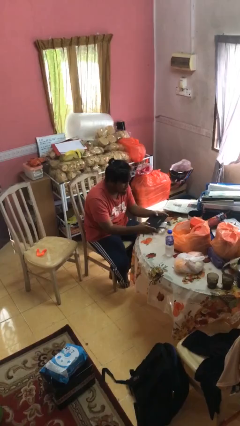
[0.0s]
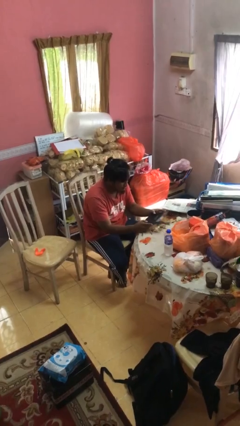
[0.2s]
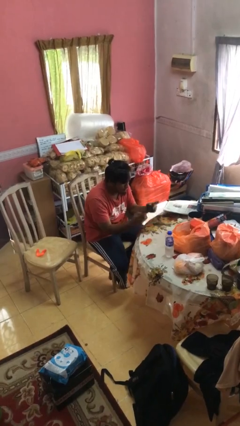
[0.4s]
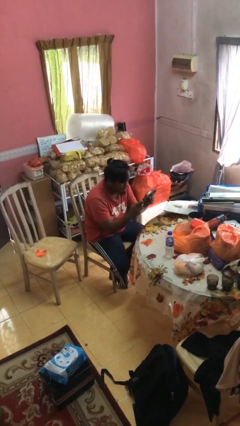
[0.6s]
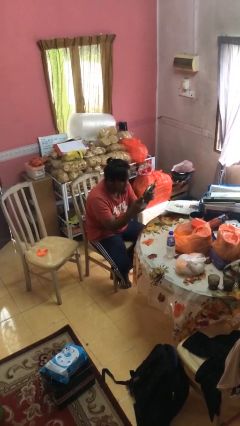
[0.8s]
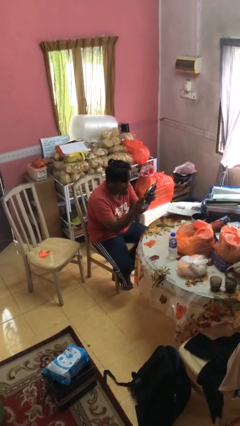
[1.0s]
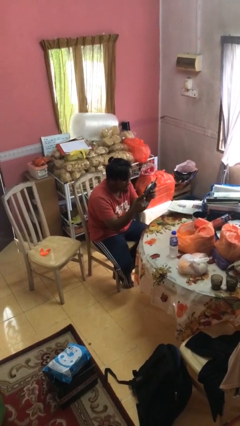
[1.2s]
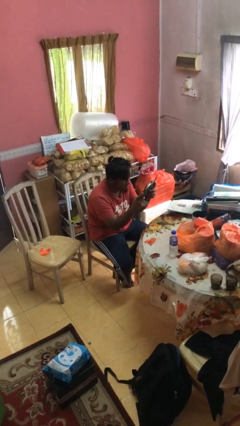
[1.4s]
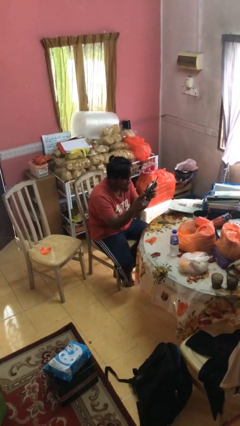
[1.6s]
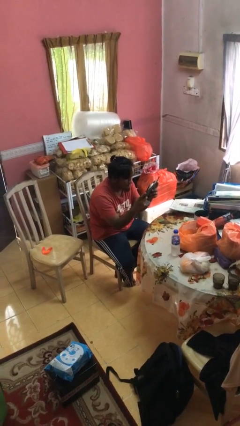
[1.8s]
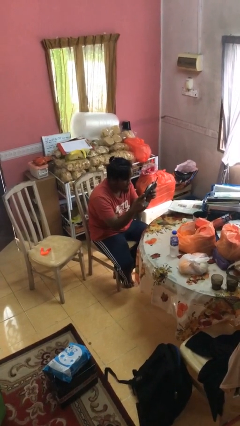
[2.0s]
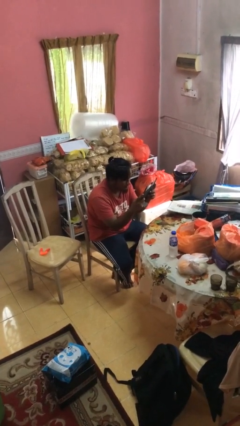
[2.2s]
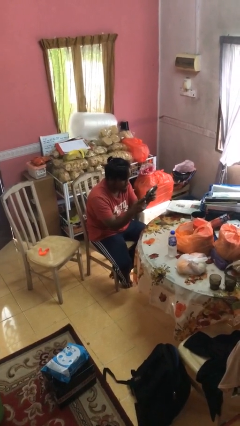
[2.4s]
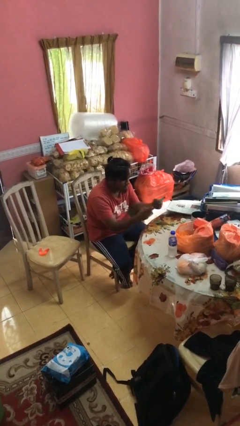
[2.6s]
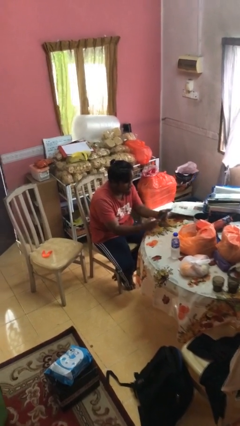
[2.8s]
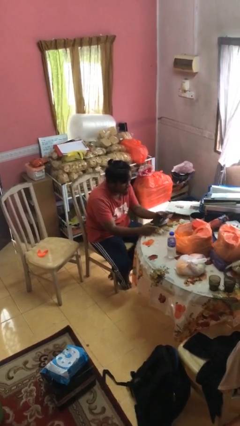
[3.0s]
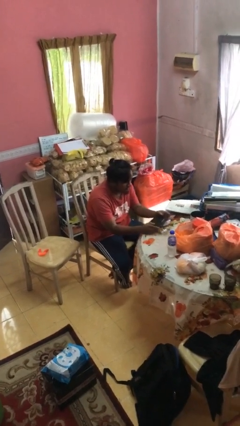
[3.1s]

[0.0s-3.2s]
person interacts with handheld game

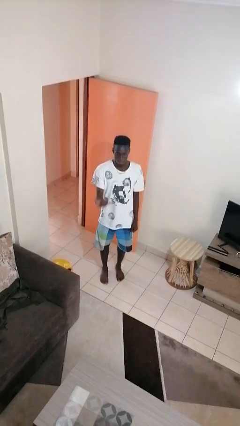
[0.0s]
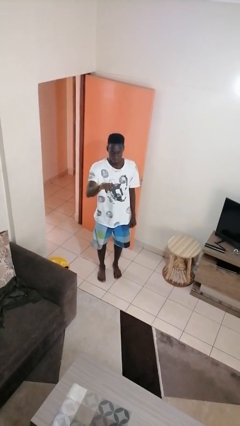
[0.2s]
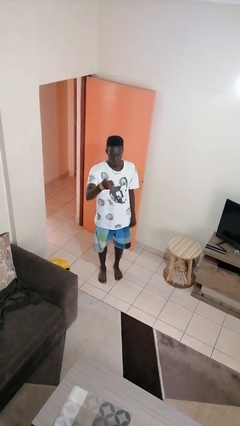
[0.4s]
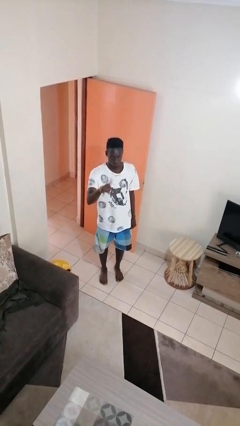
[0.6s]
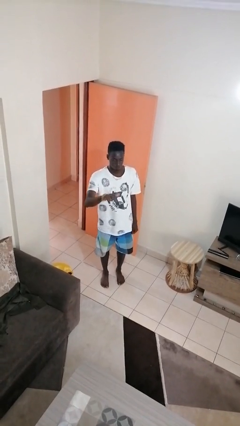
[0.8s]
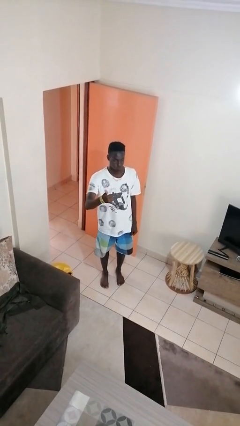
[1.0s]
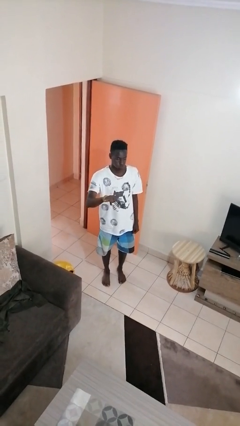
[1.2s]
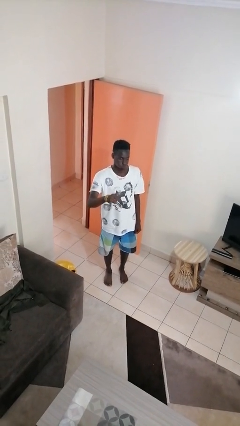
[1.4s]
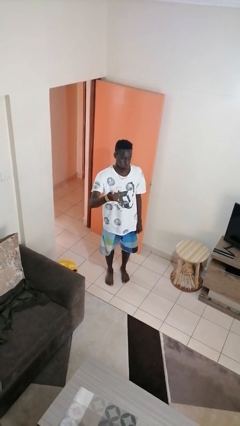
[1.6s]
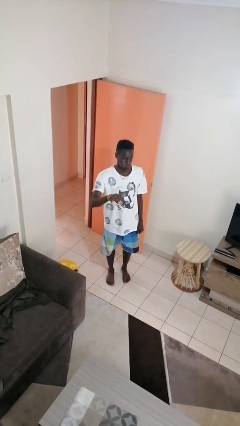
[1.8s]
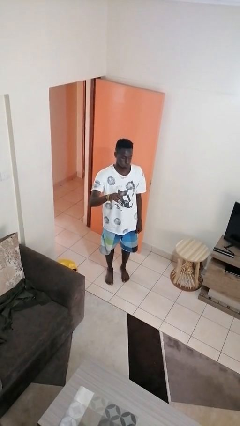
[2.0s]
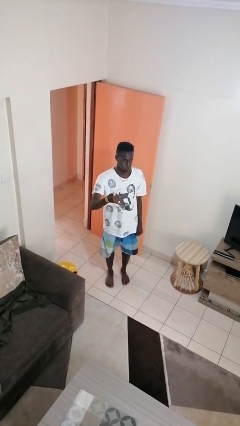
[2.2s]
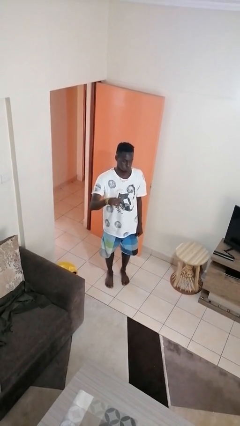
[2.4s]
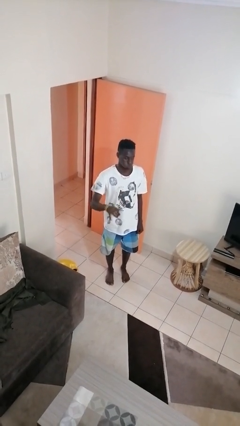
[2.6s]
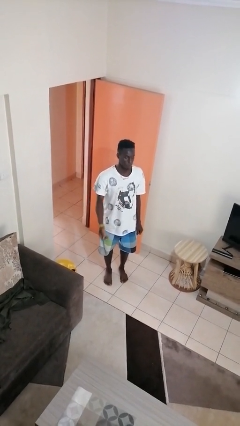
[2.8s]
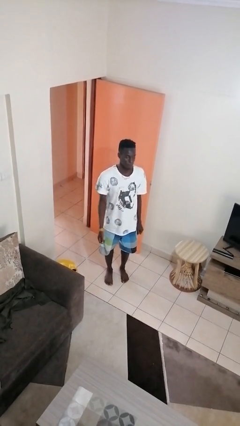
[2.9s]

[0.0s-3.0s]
person gestures hang loose

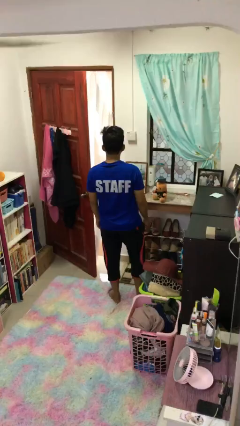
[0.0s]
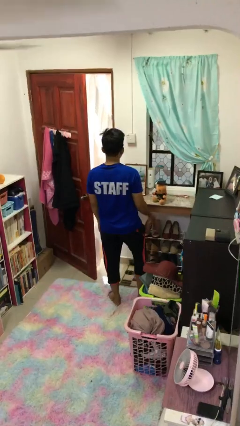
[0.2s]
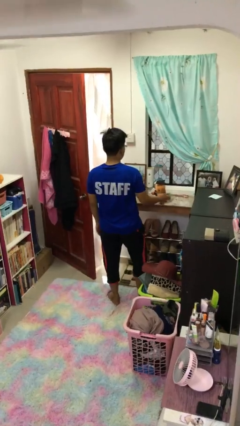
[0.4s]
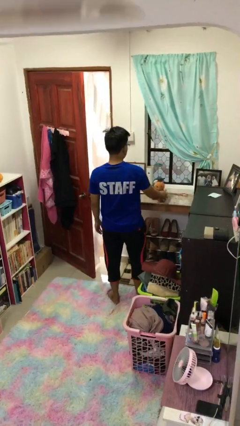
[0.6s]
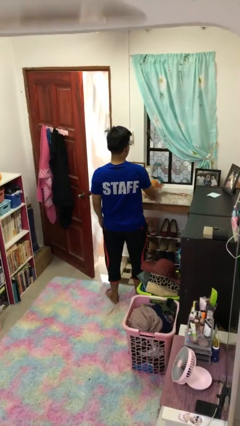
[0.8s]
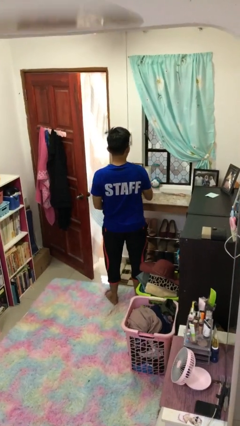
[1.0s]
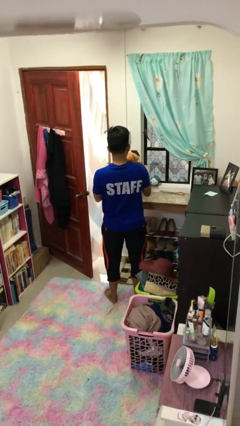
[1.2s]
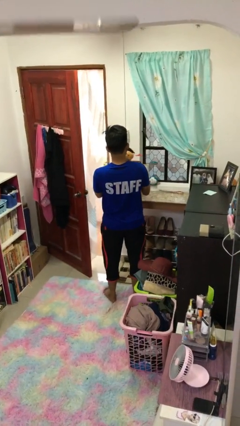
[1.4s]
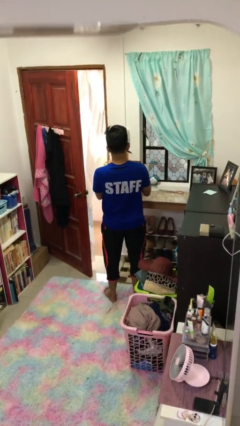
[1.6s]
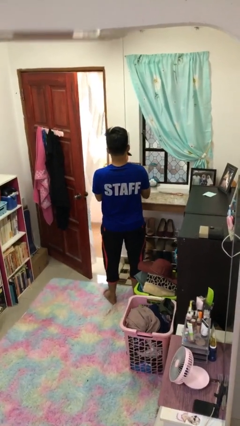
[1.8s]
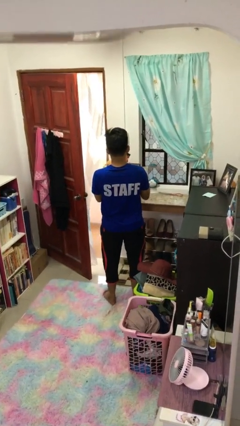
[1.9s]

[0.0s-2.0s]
person picks up object from countertop

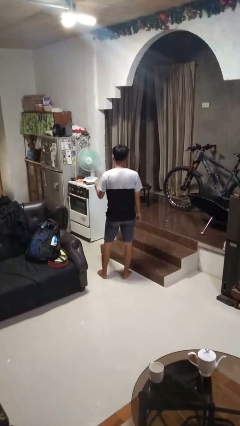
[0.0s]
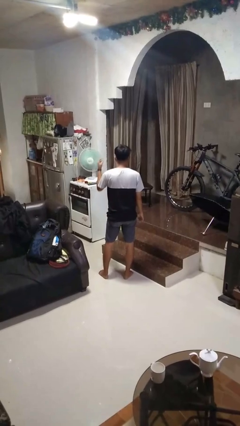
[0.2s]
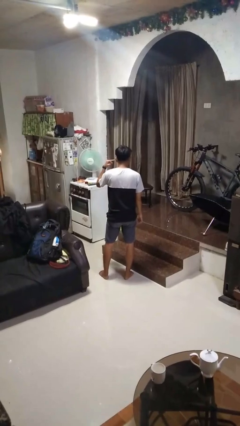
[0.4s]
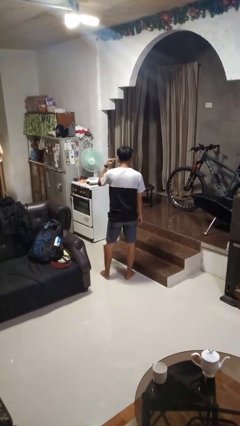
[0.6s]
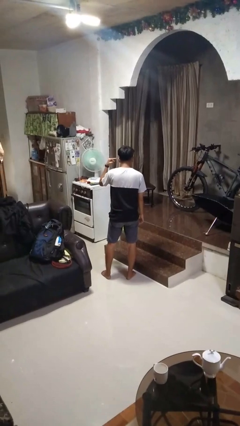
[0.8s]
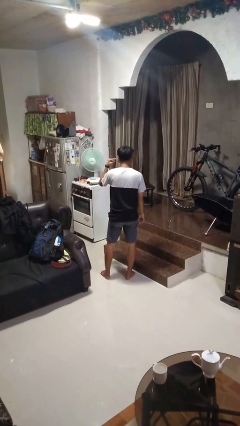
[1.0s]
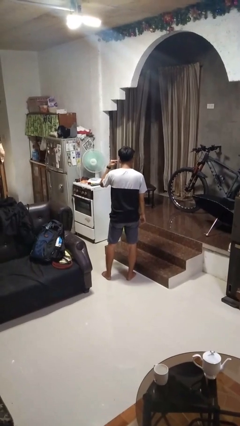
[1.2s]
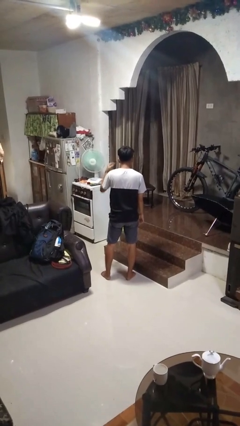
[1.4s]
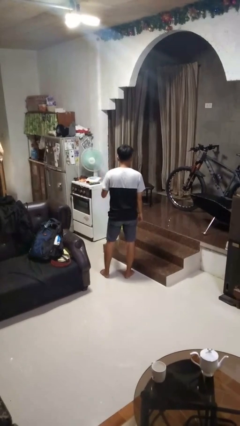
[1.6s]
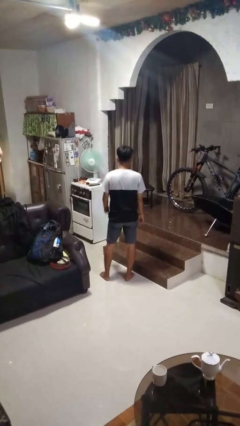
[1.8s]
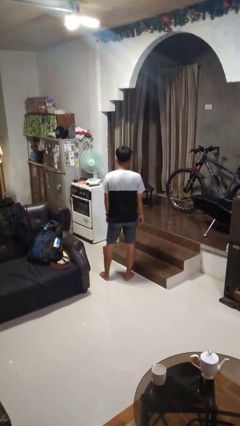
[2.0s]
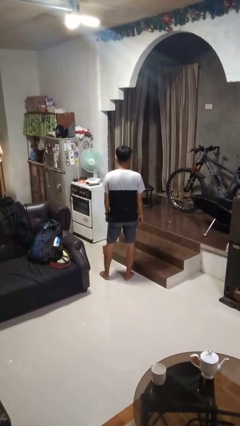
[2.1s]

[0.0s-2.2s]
person gestures listen closely

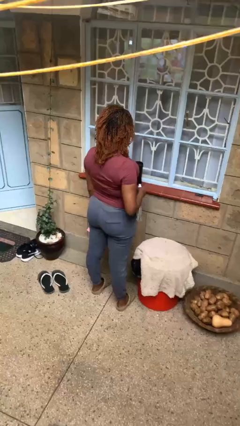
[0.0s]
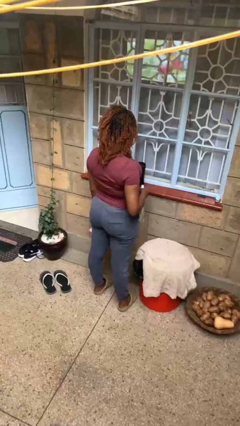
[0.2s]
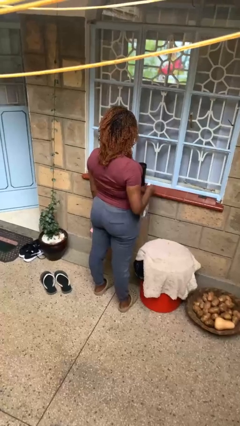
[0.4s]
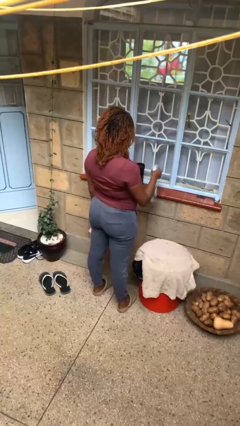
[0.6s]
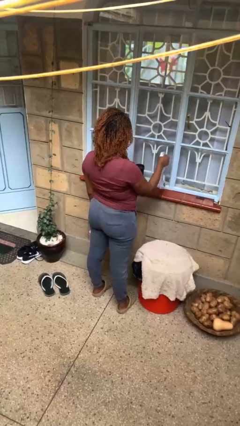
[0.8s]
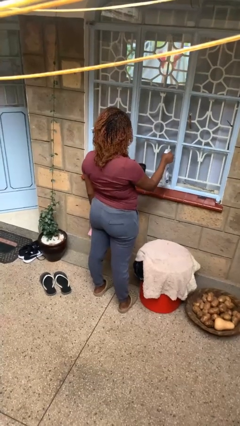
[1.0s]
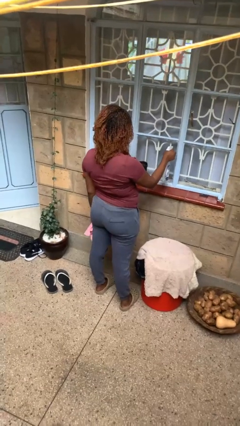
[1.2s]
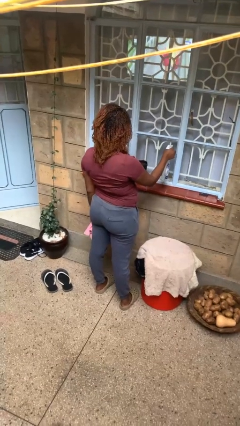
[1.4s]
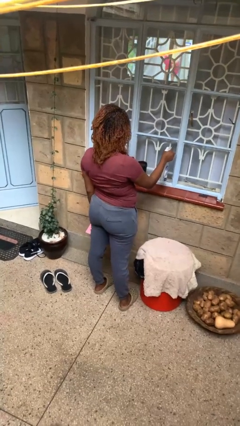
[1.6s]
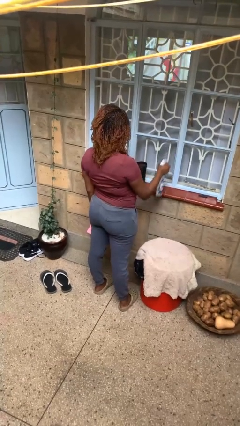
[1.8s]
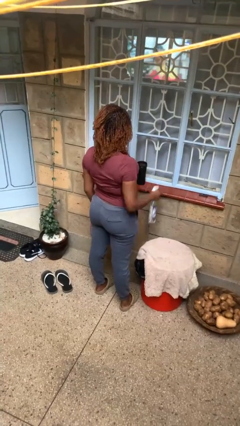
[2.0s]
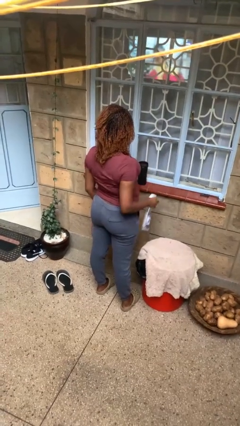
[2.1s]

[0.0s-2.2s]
person sprays from bottle

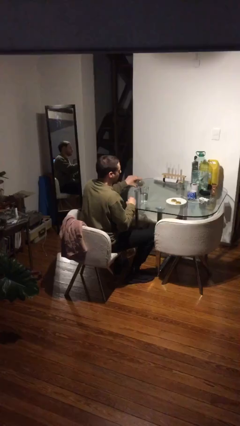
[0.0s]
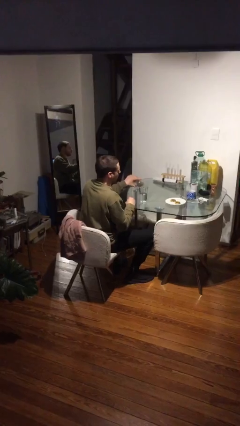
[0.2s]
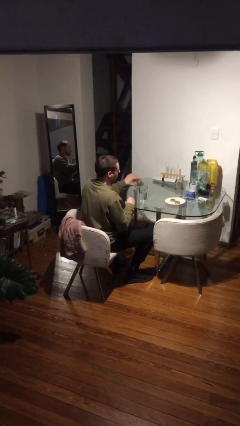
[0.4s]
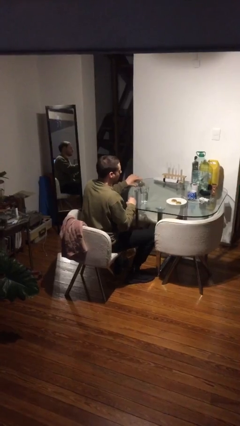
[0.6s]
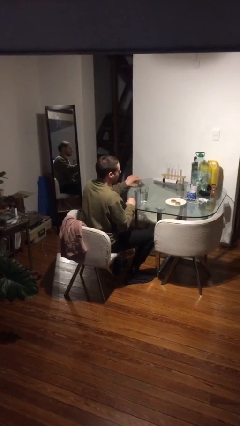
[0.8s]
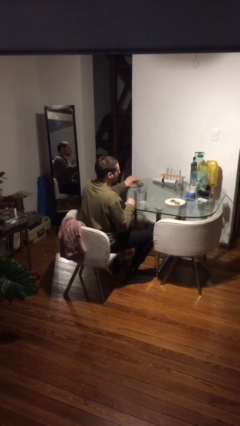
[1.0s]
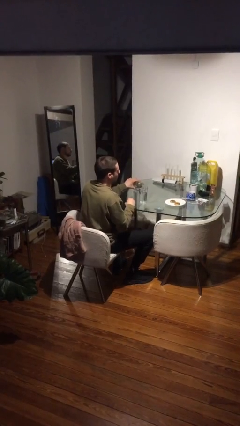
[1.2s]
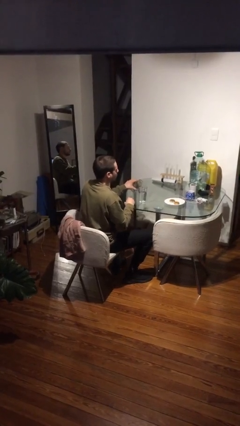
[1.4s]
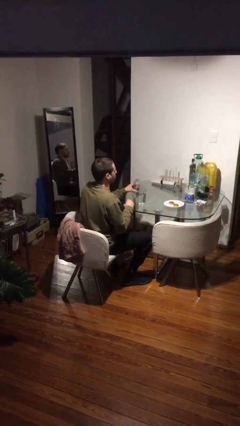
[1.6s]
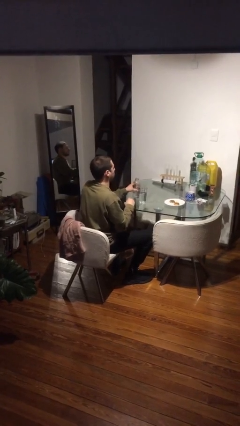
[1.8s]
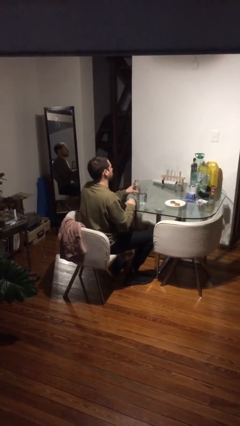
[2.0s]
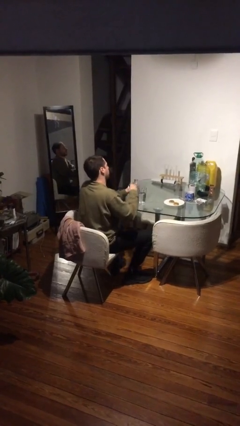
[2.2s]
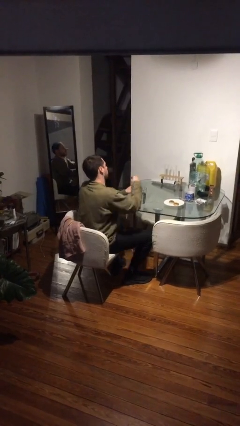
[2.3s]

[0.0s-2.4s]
person pours liquid into cup

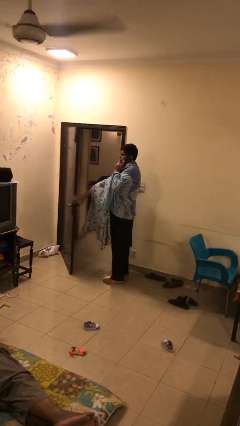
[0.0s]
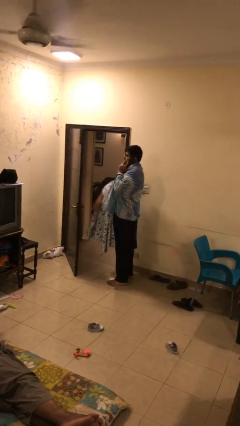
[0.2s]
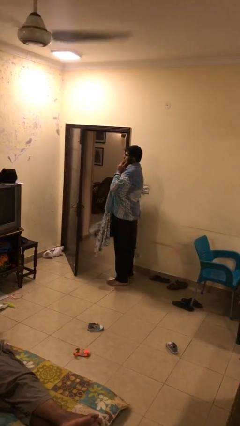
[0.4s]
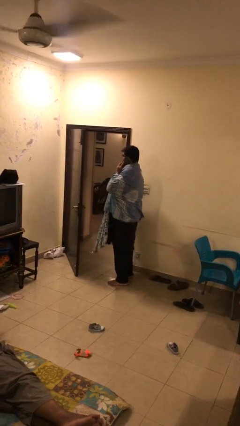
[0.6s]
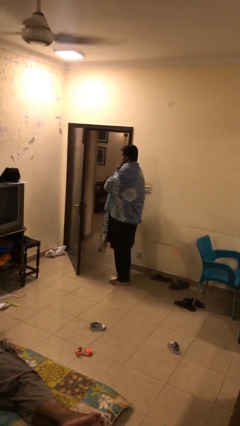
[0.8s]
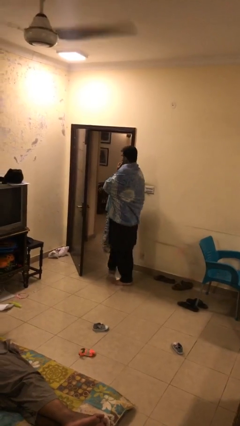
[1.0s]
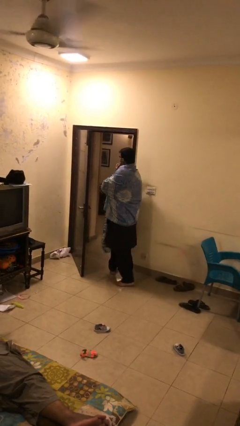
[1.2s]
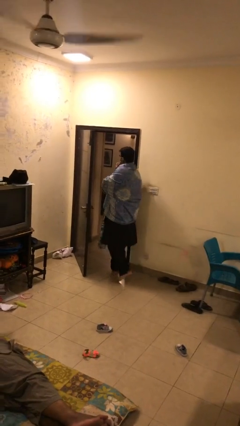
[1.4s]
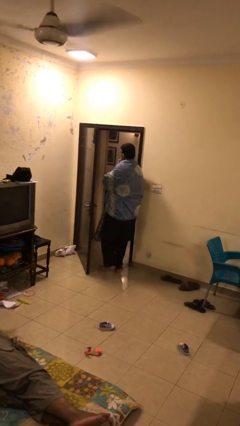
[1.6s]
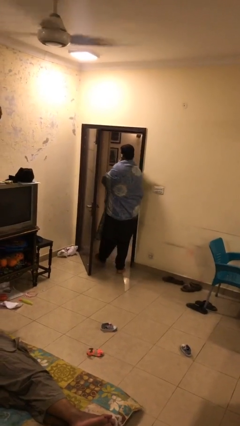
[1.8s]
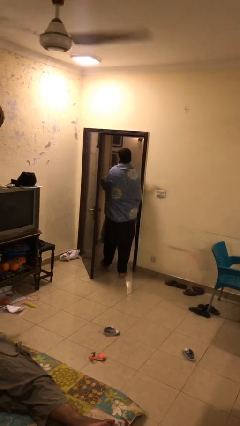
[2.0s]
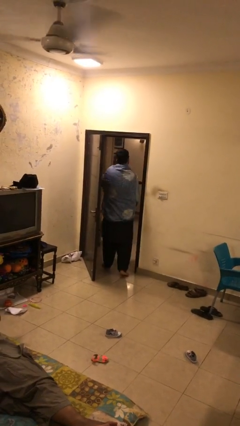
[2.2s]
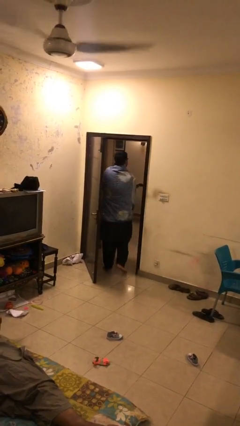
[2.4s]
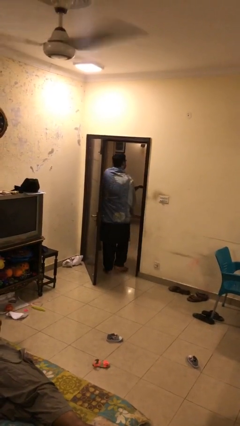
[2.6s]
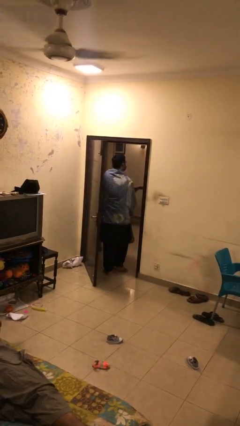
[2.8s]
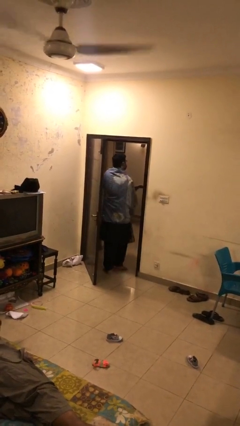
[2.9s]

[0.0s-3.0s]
person exits scene through structure
